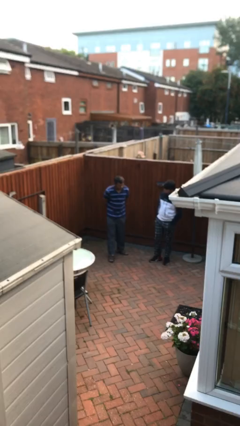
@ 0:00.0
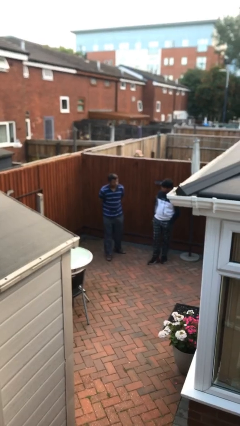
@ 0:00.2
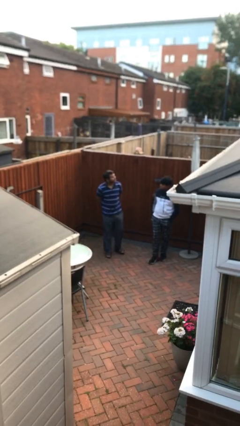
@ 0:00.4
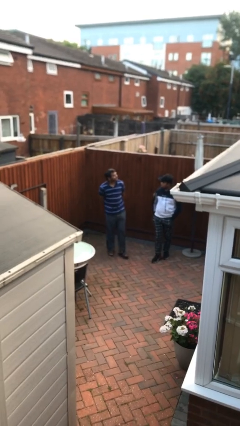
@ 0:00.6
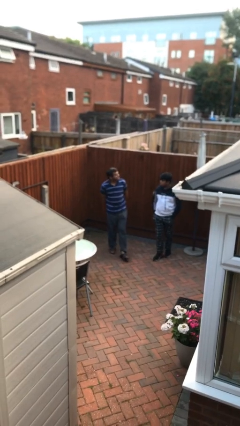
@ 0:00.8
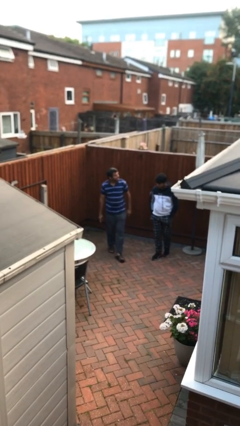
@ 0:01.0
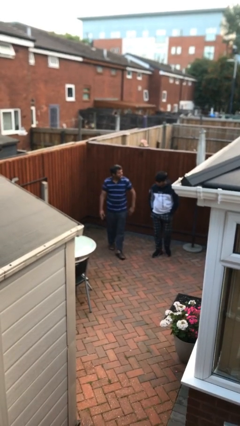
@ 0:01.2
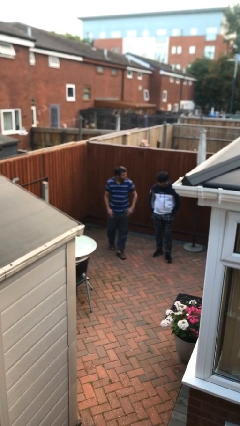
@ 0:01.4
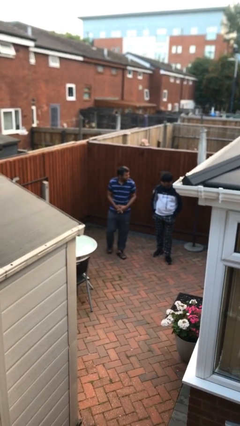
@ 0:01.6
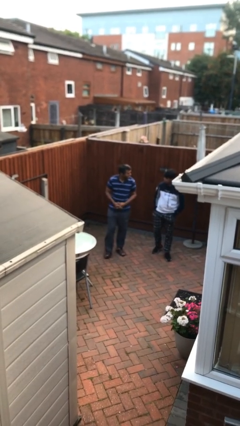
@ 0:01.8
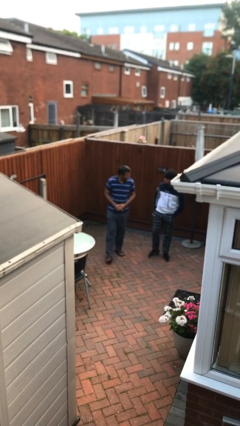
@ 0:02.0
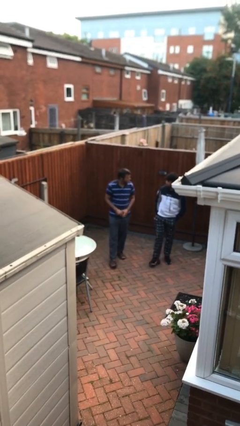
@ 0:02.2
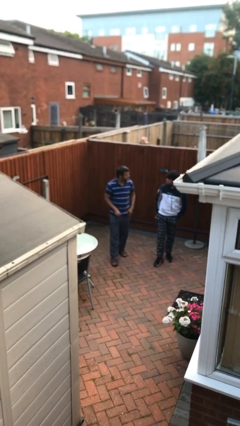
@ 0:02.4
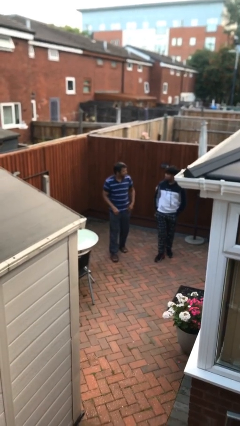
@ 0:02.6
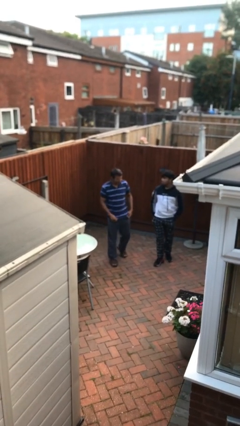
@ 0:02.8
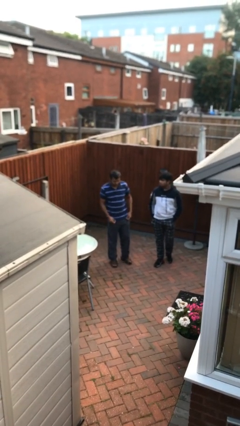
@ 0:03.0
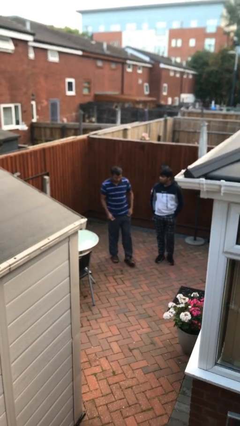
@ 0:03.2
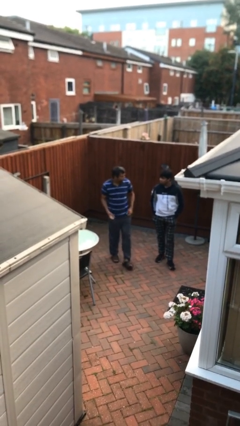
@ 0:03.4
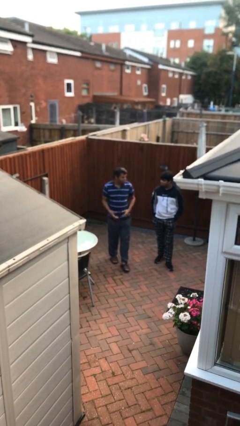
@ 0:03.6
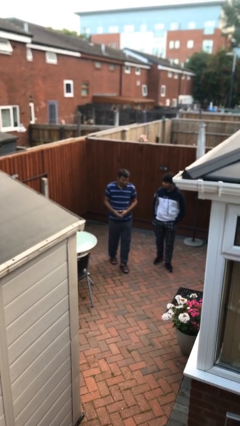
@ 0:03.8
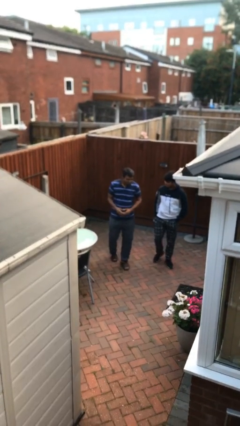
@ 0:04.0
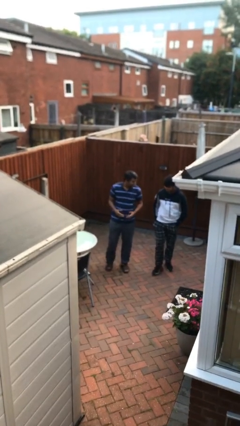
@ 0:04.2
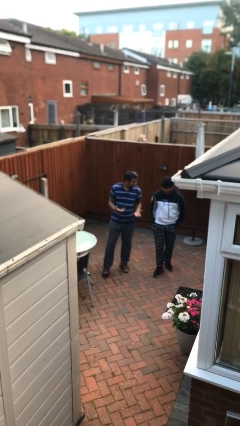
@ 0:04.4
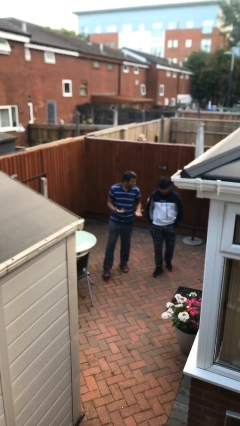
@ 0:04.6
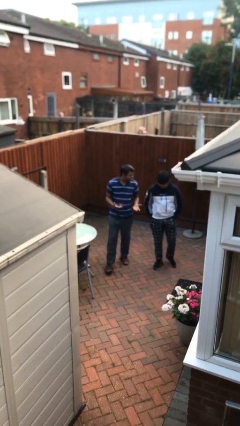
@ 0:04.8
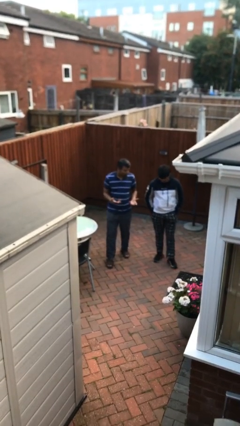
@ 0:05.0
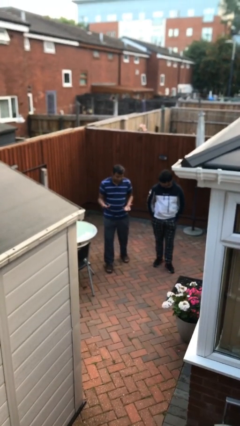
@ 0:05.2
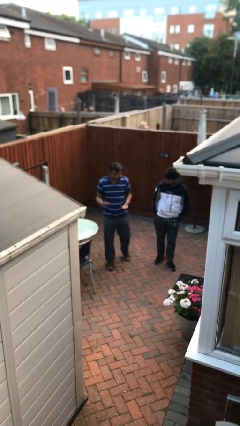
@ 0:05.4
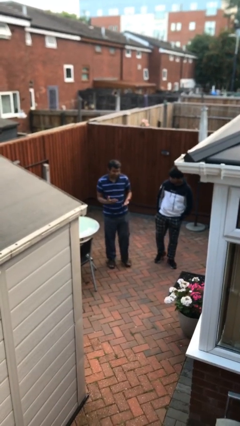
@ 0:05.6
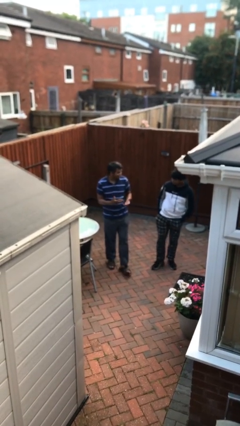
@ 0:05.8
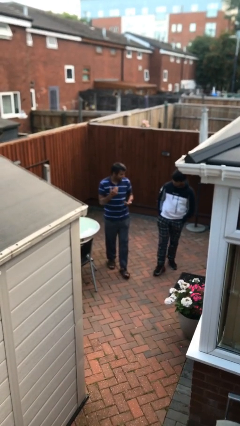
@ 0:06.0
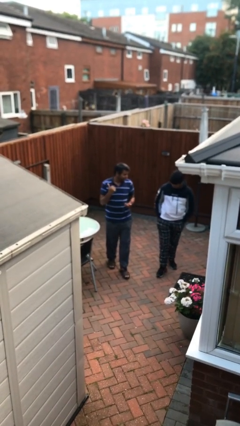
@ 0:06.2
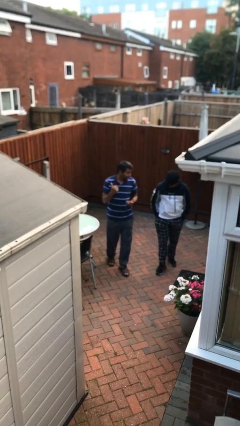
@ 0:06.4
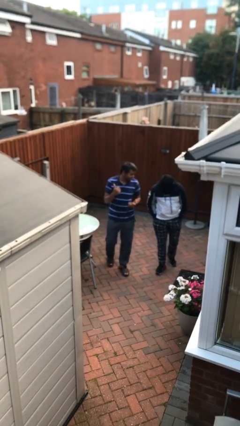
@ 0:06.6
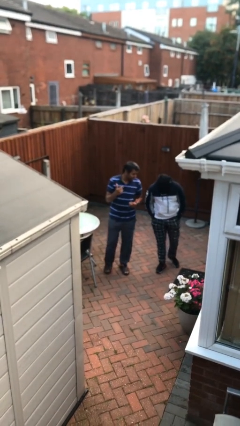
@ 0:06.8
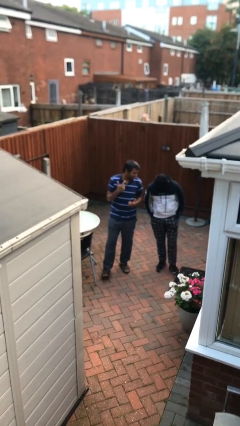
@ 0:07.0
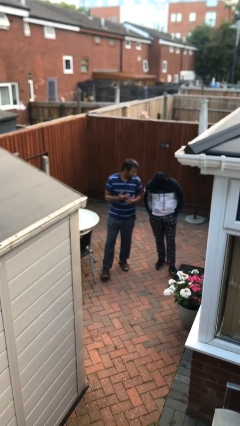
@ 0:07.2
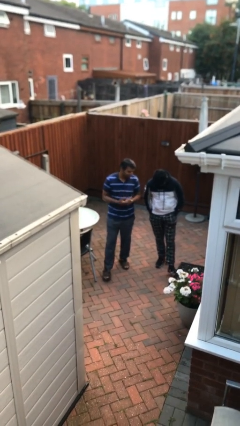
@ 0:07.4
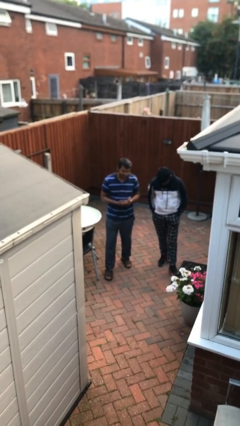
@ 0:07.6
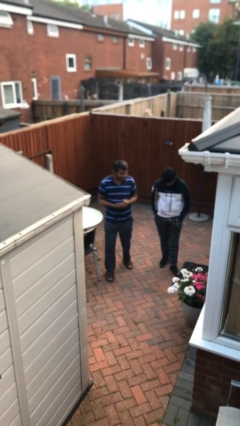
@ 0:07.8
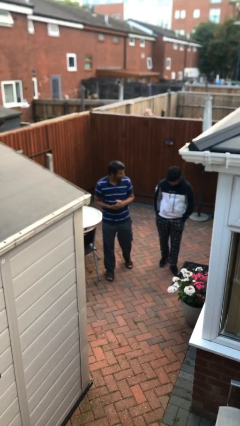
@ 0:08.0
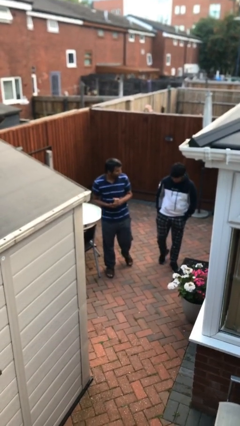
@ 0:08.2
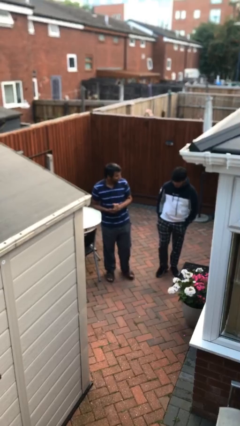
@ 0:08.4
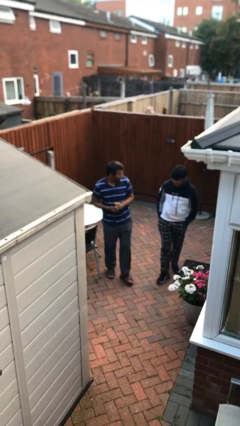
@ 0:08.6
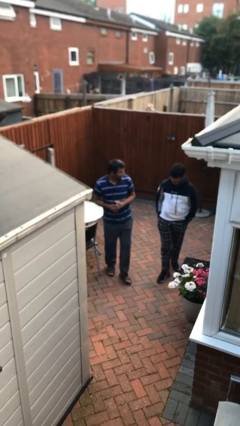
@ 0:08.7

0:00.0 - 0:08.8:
person talks to person

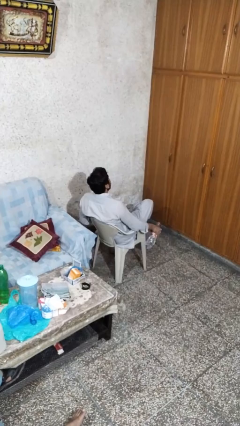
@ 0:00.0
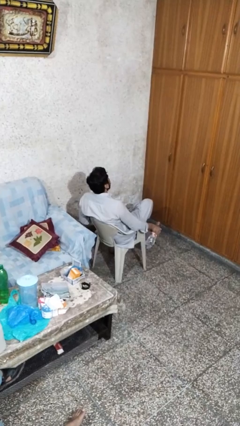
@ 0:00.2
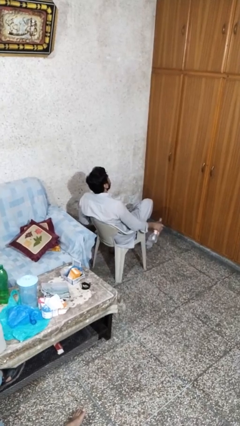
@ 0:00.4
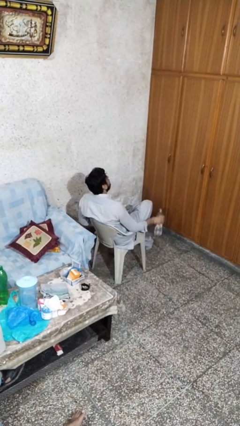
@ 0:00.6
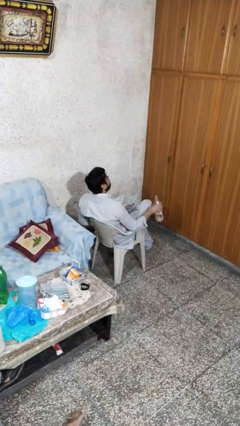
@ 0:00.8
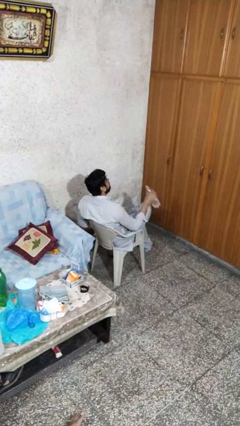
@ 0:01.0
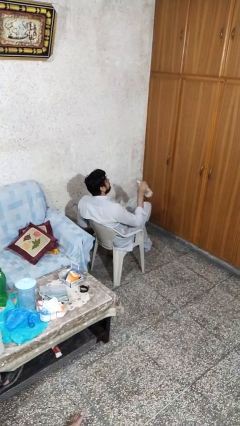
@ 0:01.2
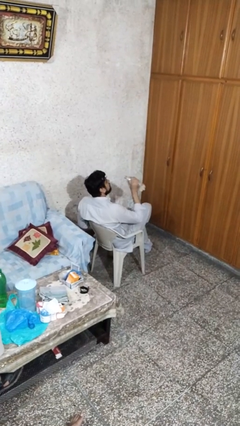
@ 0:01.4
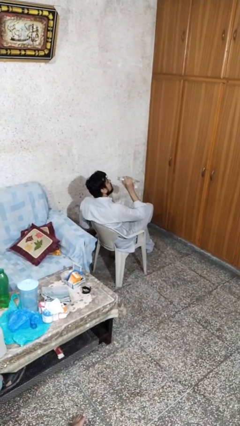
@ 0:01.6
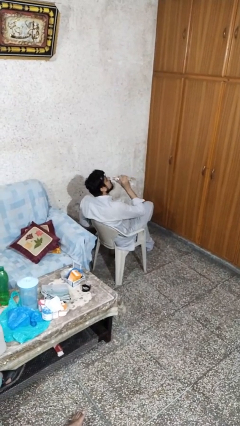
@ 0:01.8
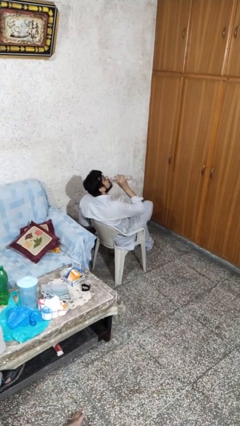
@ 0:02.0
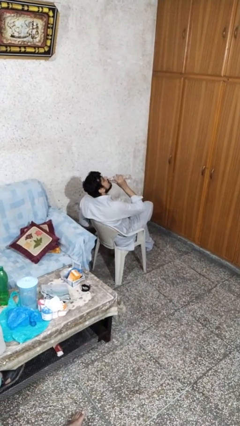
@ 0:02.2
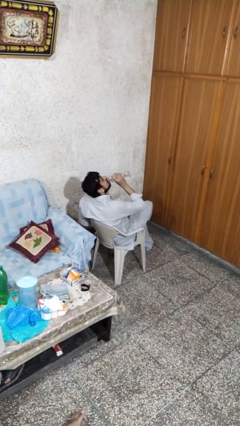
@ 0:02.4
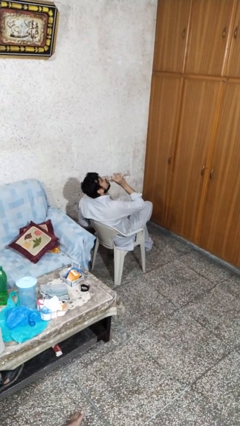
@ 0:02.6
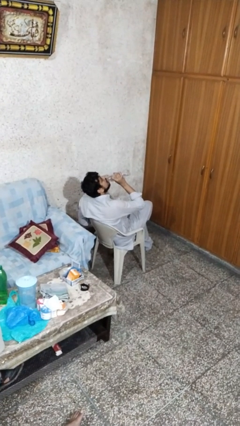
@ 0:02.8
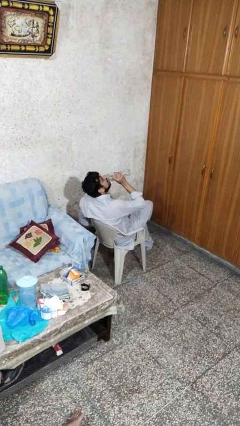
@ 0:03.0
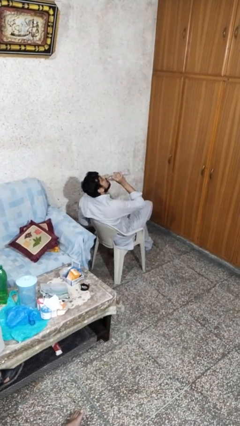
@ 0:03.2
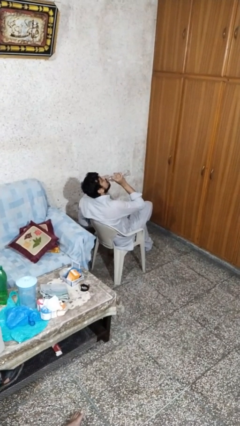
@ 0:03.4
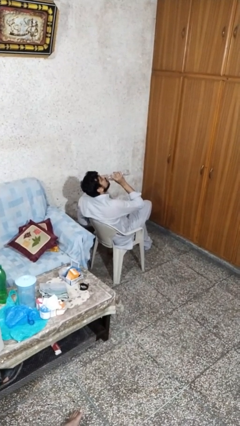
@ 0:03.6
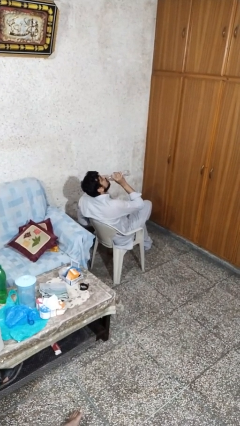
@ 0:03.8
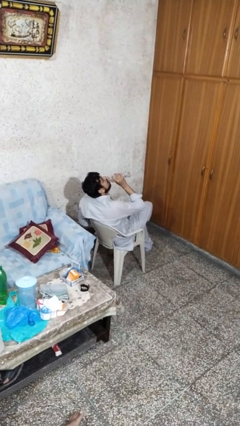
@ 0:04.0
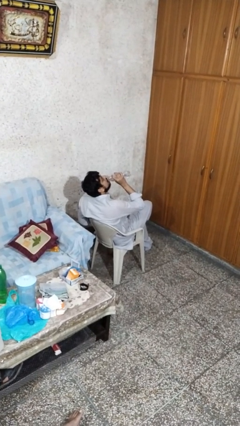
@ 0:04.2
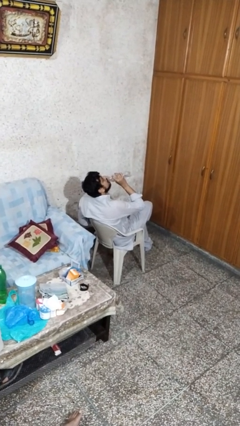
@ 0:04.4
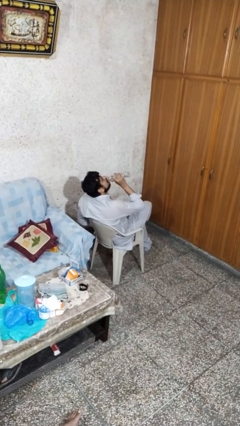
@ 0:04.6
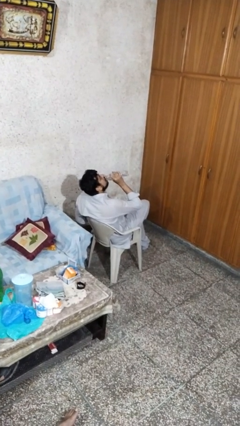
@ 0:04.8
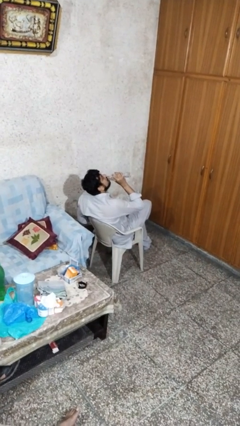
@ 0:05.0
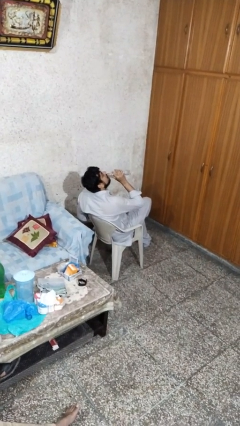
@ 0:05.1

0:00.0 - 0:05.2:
person drinks from bottle

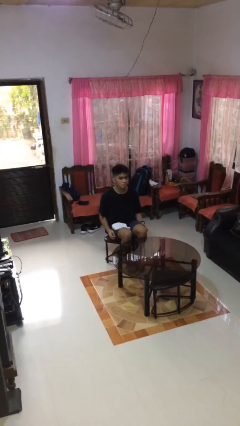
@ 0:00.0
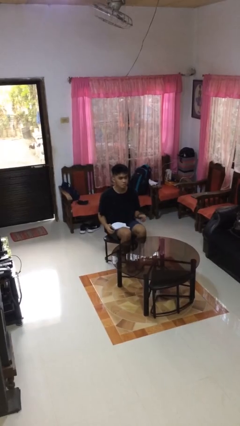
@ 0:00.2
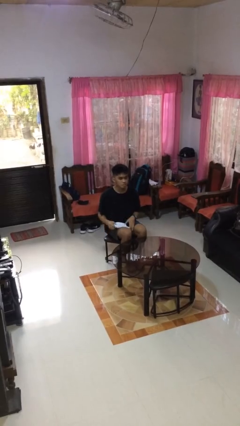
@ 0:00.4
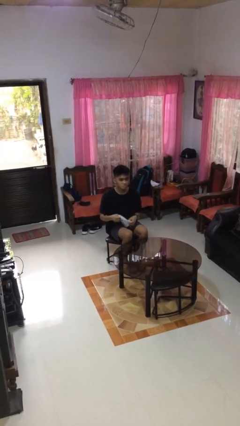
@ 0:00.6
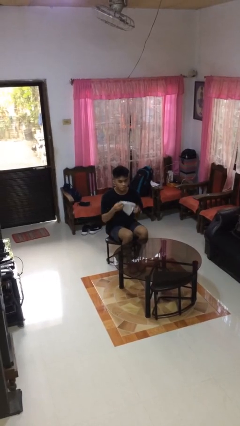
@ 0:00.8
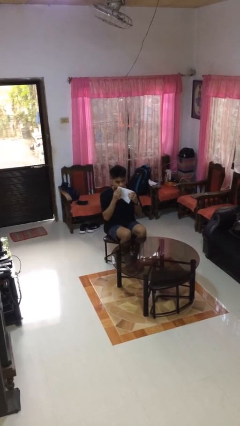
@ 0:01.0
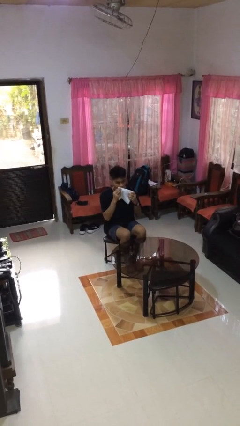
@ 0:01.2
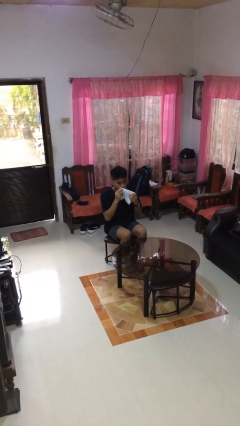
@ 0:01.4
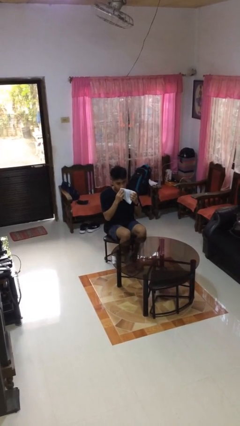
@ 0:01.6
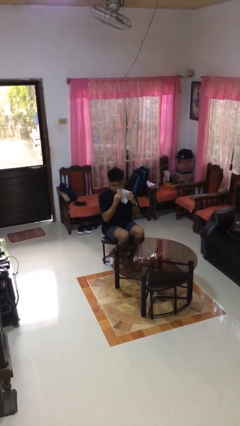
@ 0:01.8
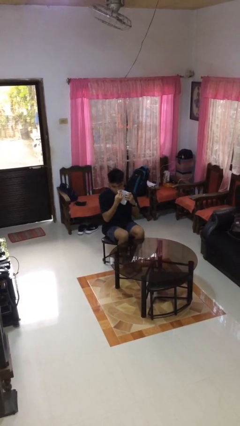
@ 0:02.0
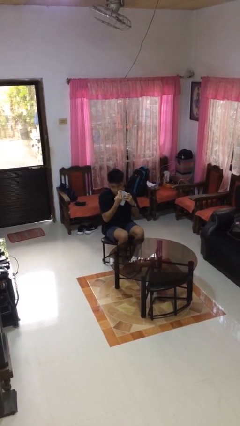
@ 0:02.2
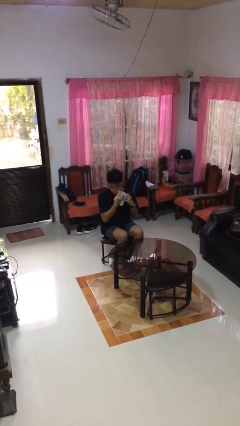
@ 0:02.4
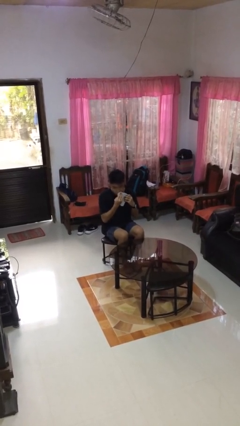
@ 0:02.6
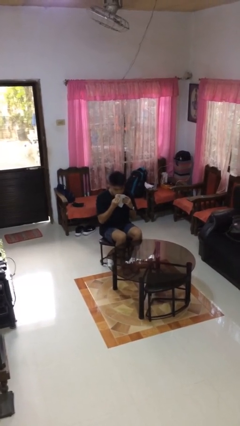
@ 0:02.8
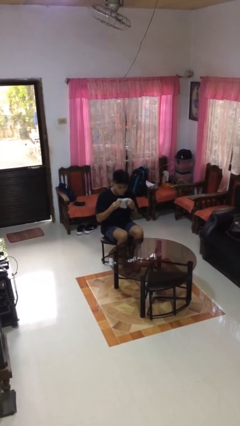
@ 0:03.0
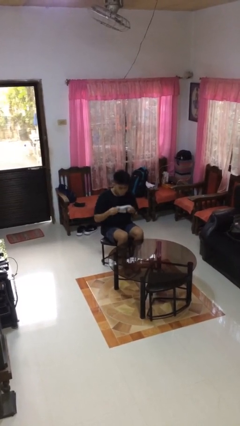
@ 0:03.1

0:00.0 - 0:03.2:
person wipes mouth with napkin

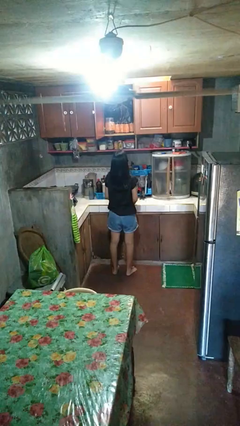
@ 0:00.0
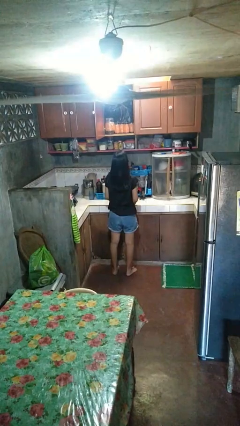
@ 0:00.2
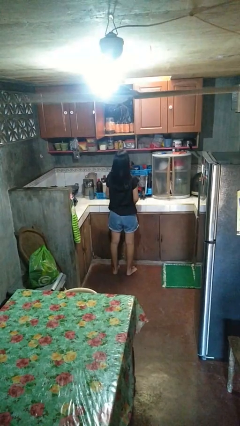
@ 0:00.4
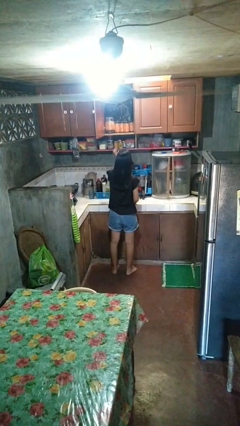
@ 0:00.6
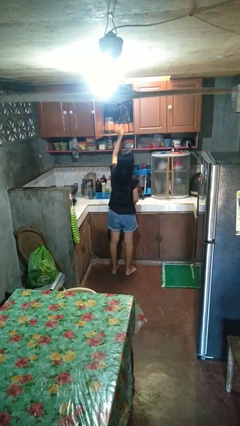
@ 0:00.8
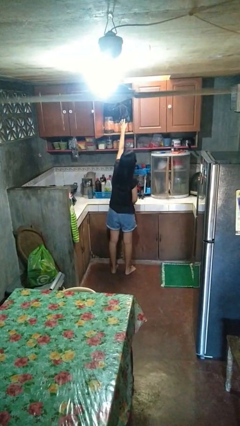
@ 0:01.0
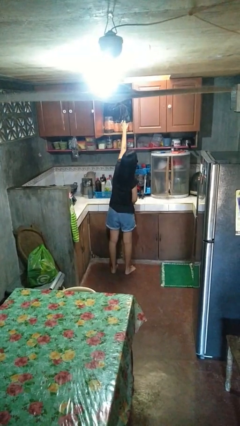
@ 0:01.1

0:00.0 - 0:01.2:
person picks up object from cabinet
